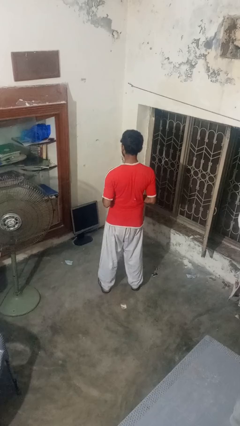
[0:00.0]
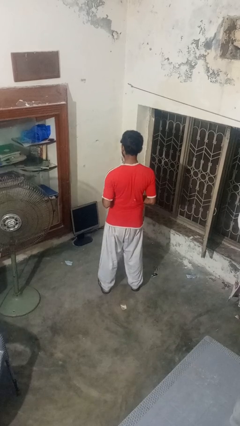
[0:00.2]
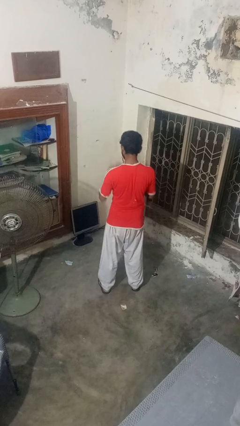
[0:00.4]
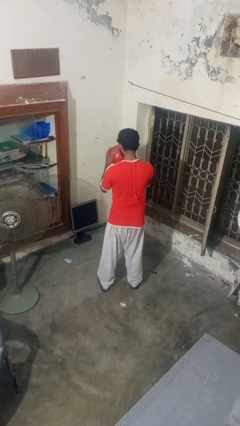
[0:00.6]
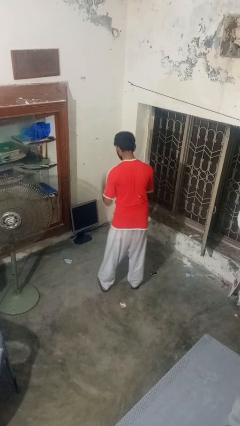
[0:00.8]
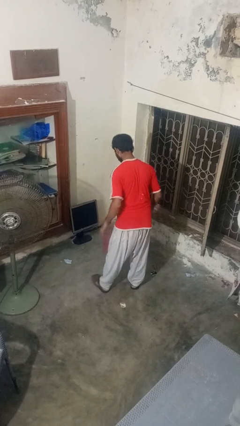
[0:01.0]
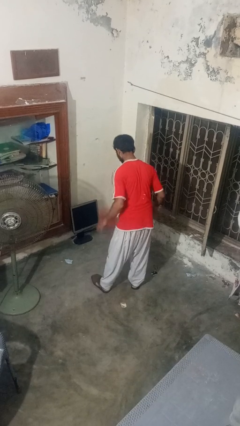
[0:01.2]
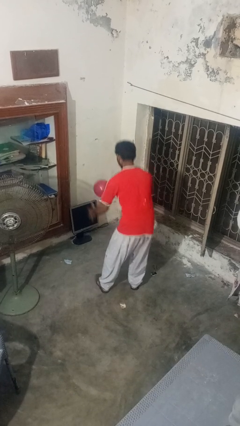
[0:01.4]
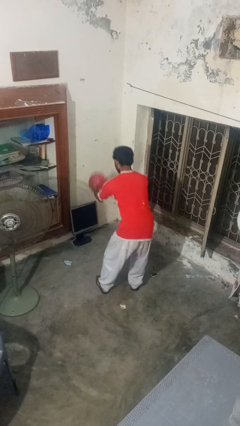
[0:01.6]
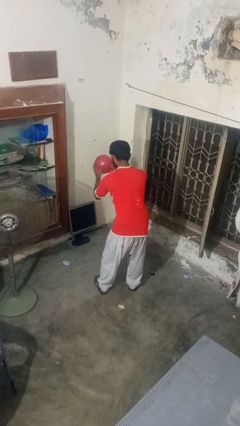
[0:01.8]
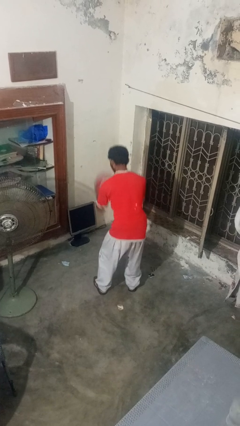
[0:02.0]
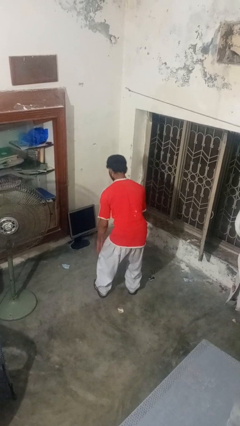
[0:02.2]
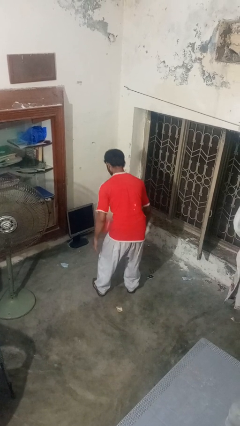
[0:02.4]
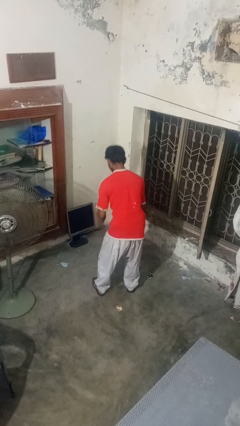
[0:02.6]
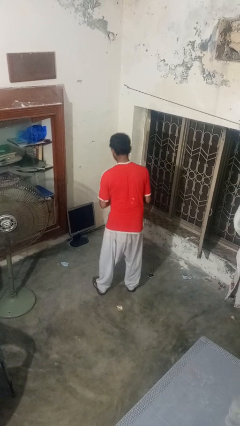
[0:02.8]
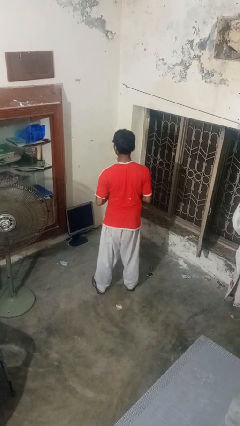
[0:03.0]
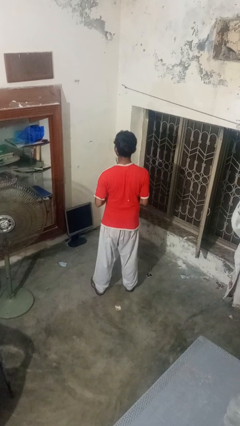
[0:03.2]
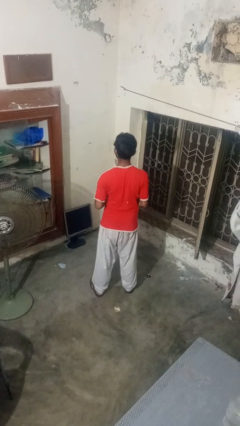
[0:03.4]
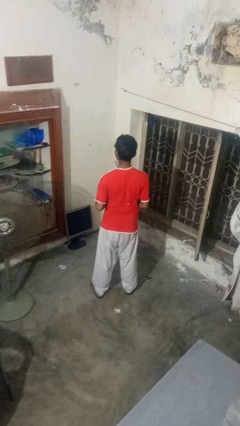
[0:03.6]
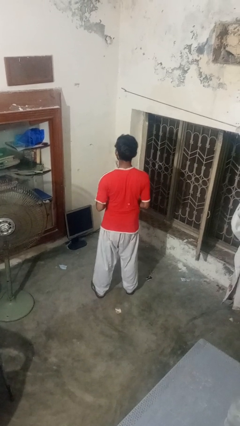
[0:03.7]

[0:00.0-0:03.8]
person bounces ball on floor

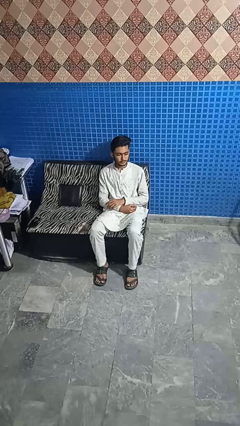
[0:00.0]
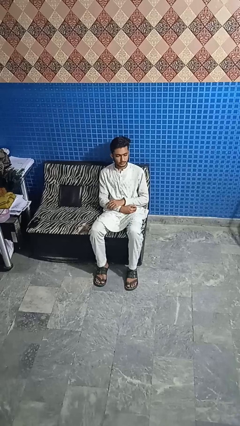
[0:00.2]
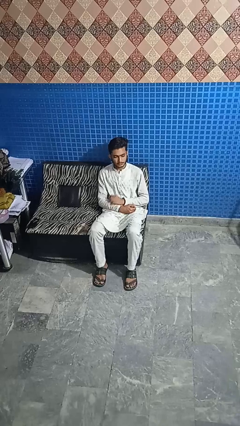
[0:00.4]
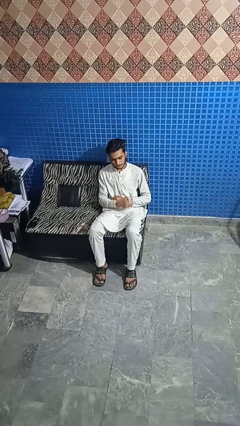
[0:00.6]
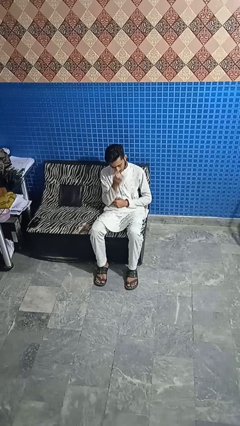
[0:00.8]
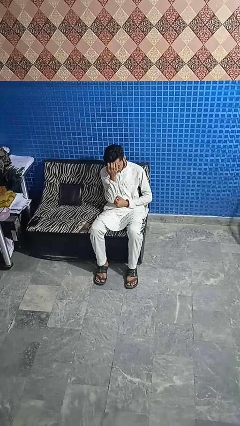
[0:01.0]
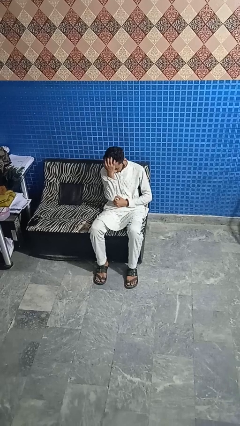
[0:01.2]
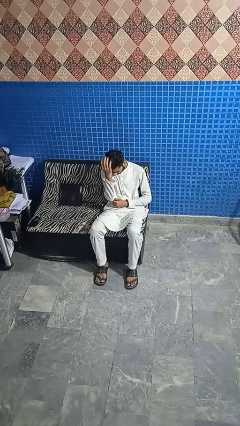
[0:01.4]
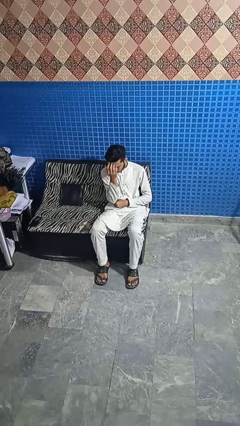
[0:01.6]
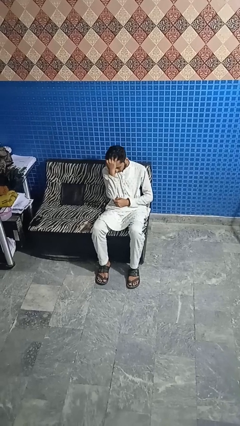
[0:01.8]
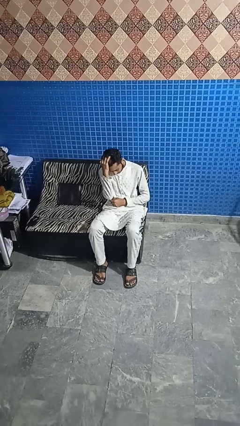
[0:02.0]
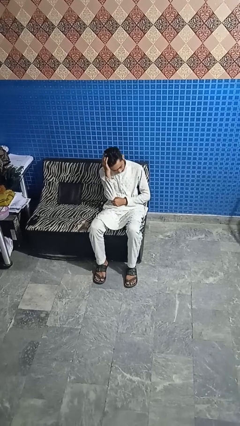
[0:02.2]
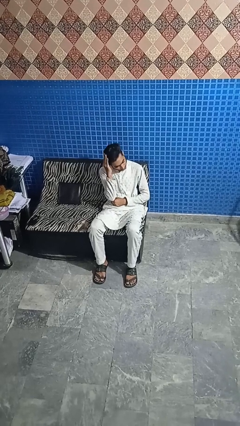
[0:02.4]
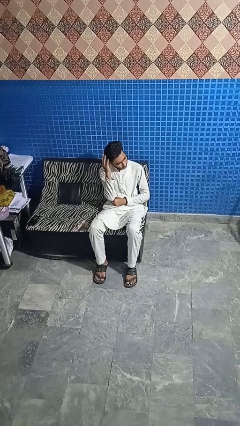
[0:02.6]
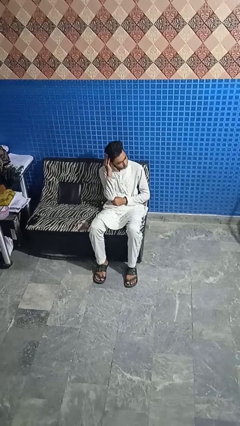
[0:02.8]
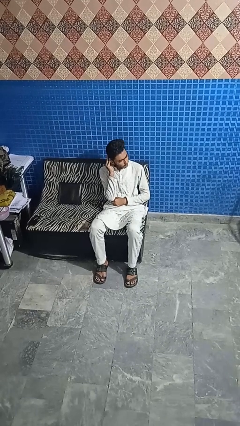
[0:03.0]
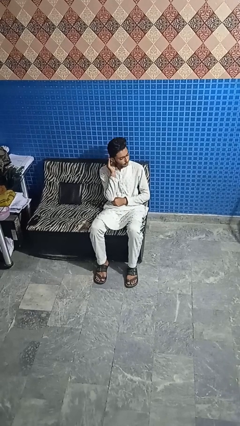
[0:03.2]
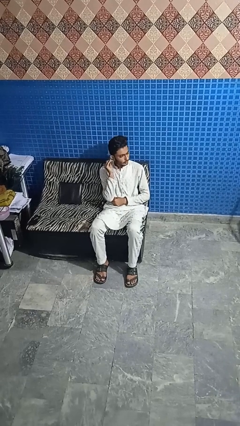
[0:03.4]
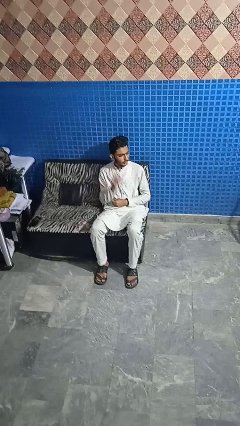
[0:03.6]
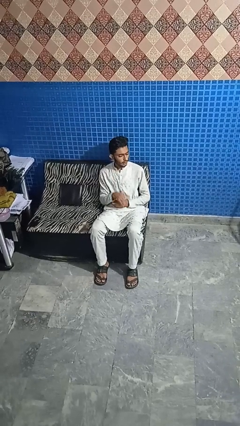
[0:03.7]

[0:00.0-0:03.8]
person strokes hair

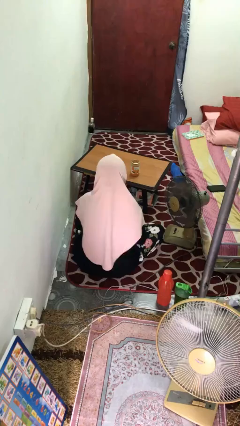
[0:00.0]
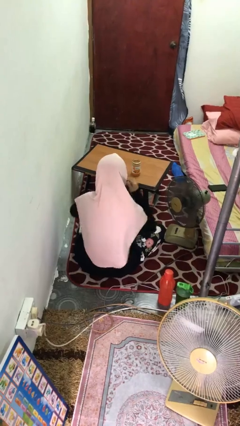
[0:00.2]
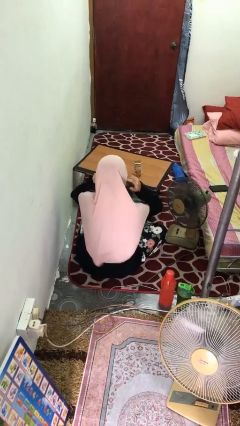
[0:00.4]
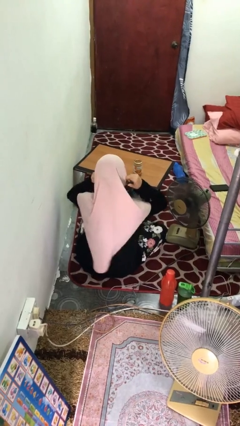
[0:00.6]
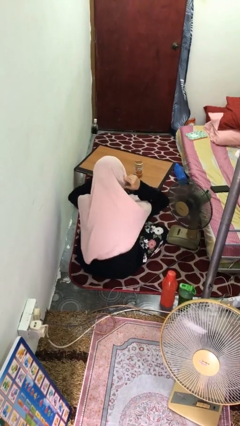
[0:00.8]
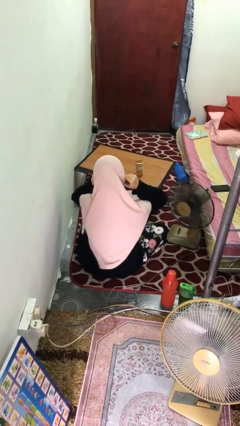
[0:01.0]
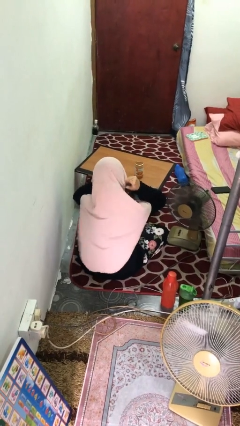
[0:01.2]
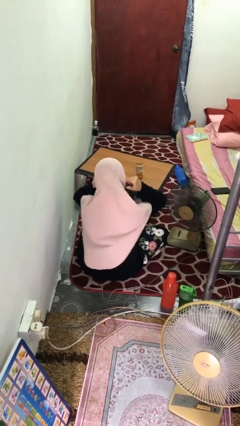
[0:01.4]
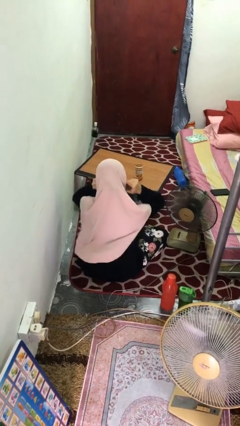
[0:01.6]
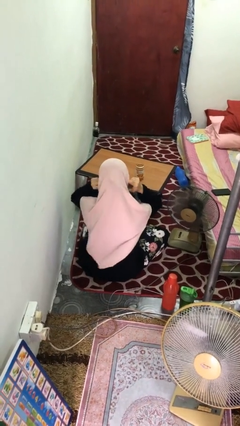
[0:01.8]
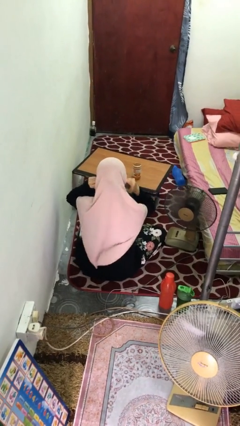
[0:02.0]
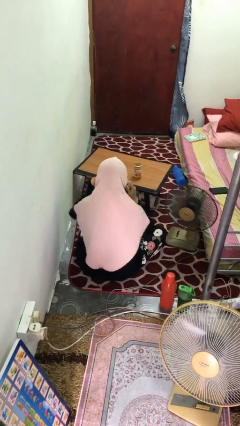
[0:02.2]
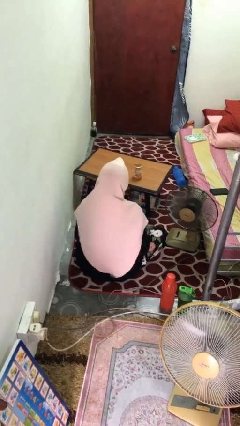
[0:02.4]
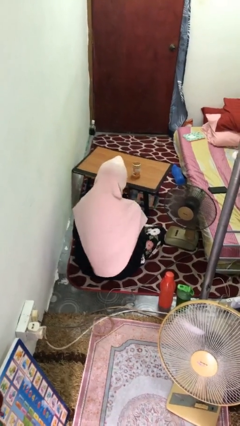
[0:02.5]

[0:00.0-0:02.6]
person puts fingers in ear

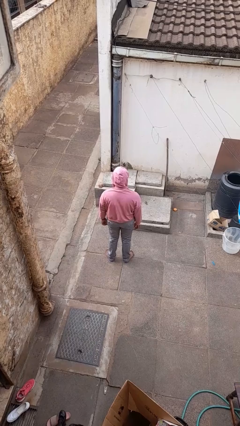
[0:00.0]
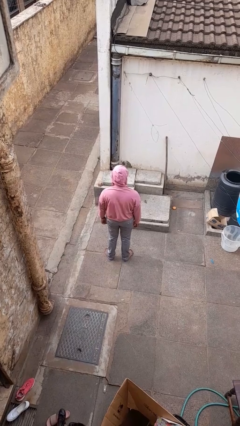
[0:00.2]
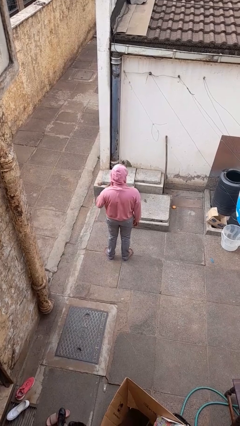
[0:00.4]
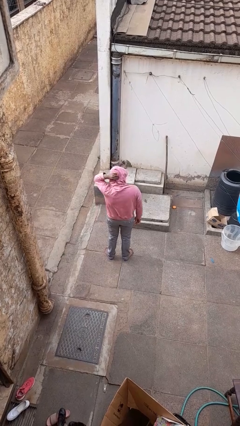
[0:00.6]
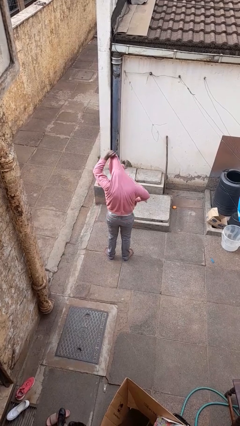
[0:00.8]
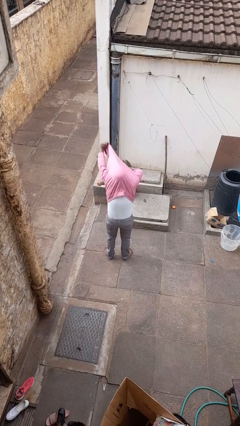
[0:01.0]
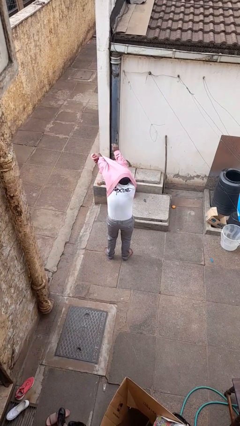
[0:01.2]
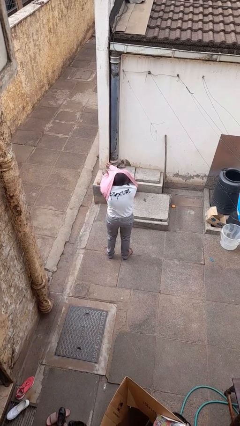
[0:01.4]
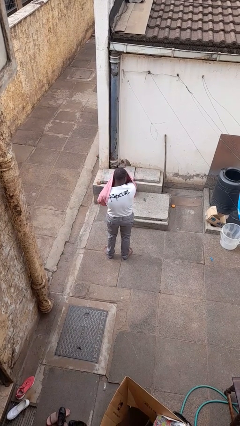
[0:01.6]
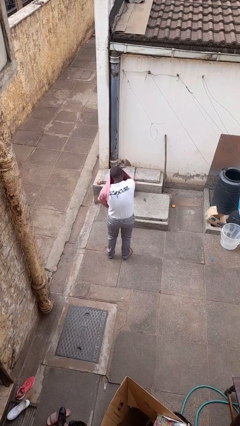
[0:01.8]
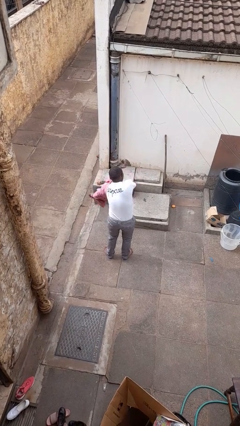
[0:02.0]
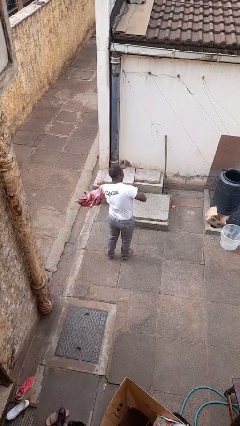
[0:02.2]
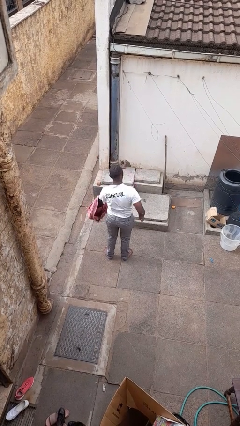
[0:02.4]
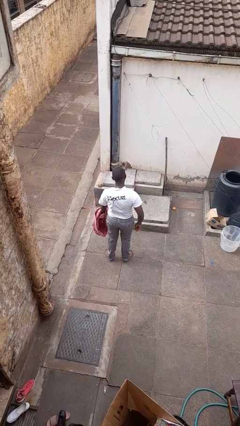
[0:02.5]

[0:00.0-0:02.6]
person takes off hoodie

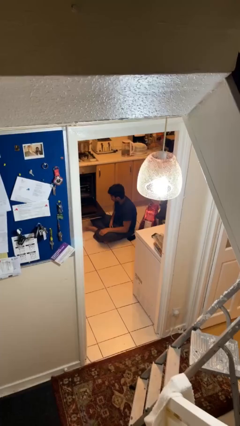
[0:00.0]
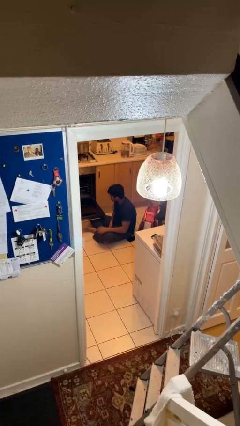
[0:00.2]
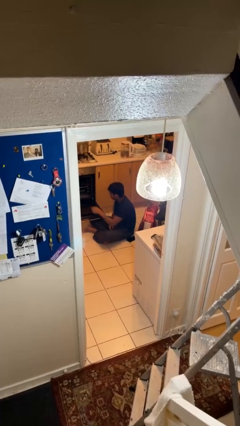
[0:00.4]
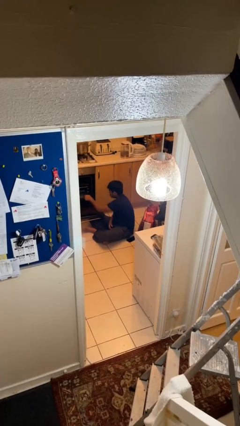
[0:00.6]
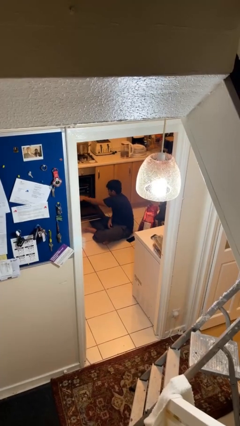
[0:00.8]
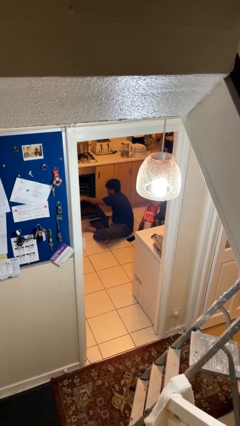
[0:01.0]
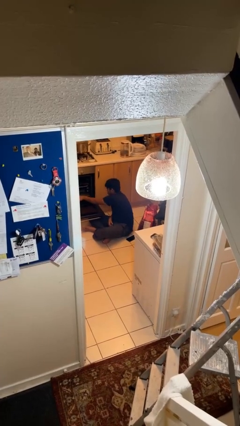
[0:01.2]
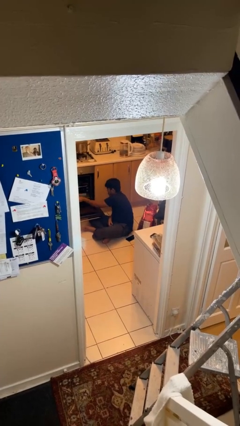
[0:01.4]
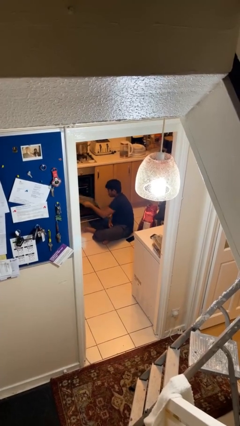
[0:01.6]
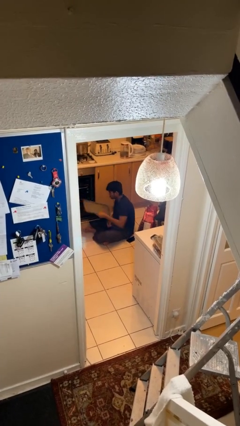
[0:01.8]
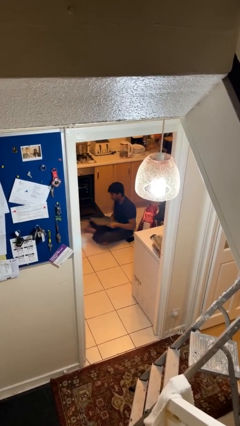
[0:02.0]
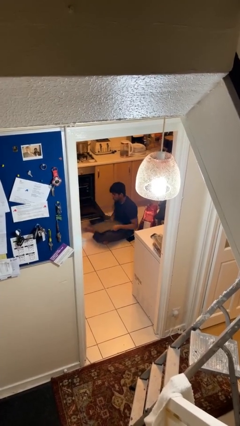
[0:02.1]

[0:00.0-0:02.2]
person takes object from oven

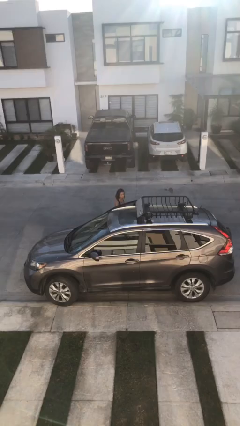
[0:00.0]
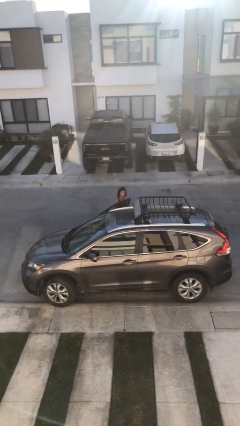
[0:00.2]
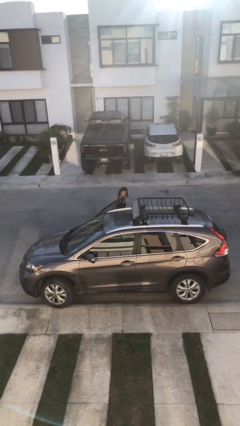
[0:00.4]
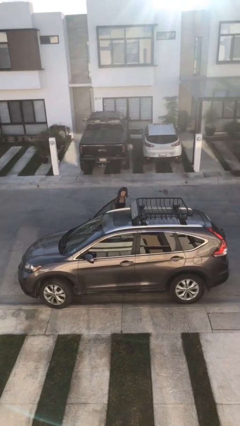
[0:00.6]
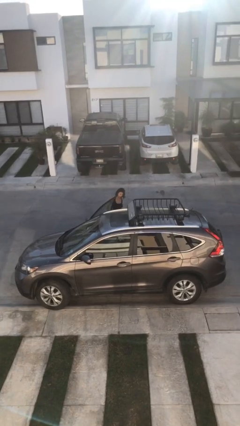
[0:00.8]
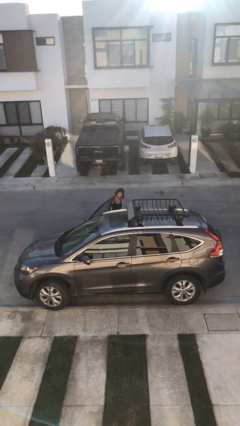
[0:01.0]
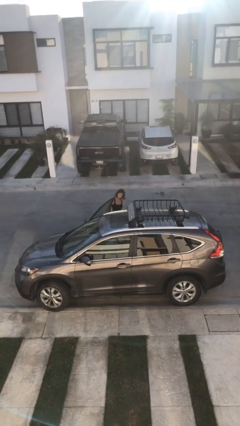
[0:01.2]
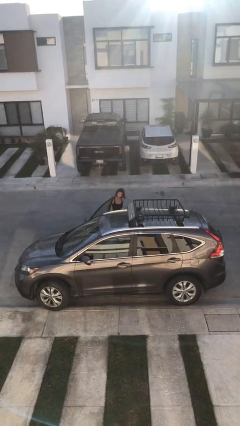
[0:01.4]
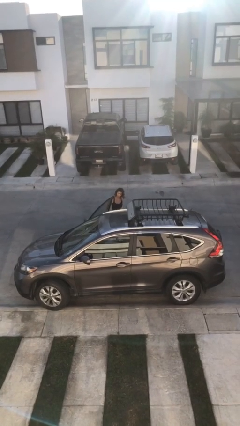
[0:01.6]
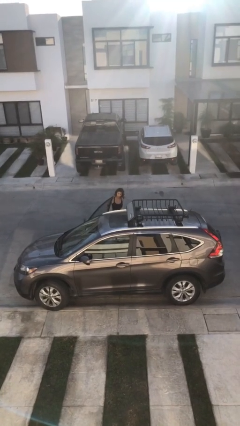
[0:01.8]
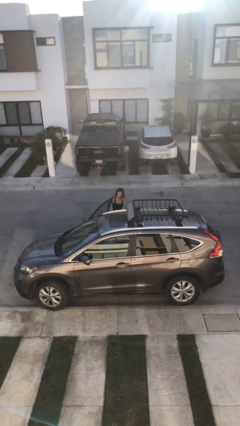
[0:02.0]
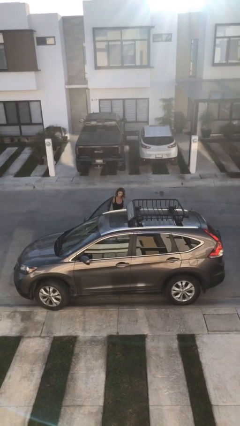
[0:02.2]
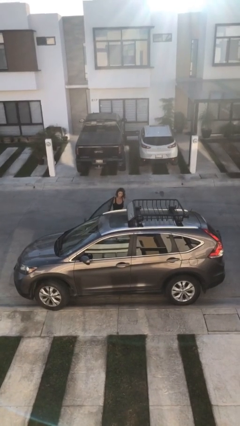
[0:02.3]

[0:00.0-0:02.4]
person closes car door
